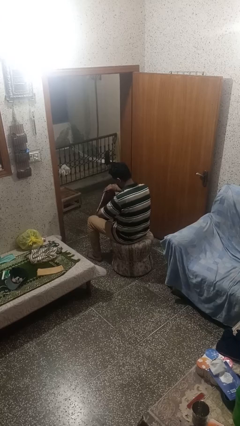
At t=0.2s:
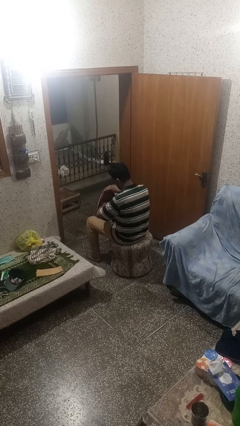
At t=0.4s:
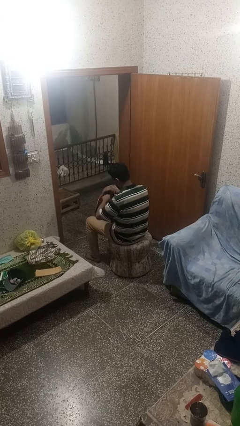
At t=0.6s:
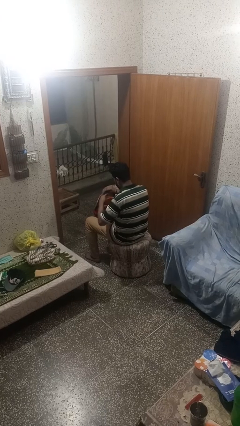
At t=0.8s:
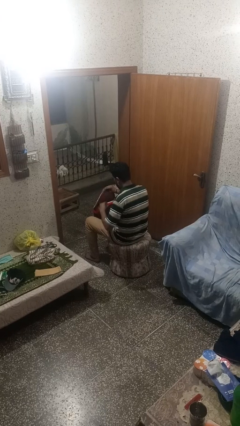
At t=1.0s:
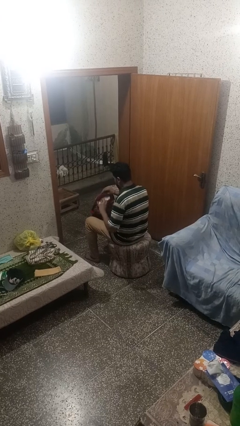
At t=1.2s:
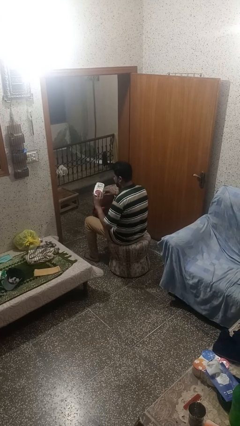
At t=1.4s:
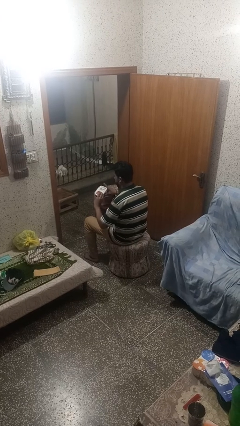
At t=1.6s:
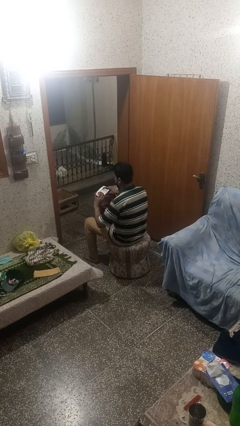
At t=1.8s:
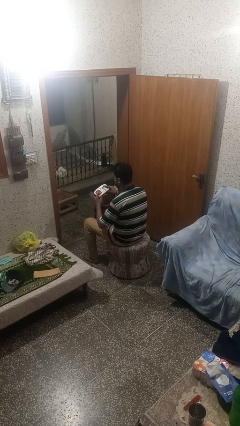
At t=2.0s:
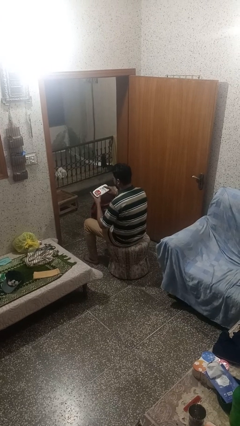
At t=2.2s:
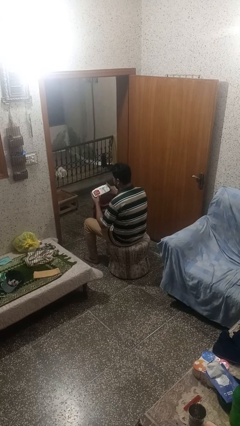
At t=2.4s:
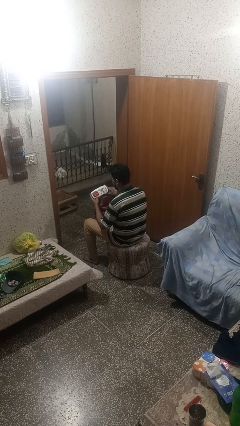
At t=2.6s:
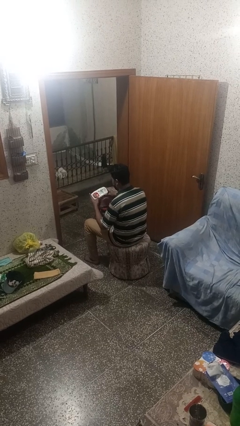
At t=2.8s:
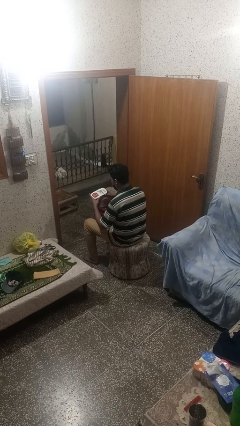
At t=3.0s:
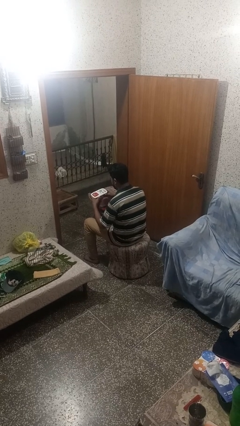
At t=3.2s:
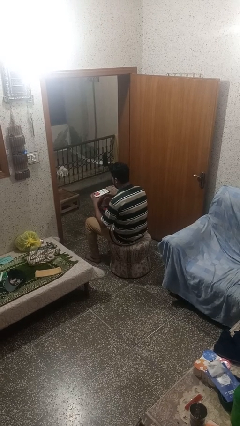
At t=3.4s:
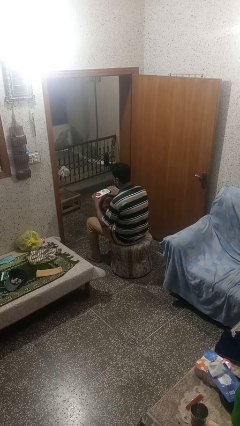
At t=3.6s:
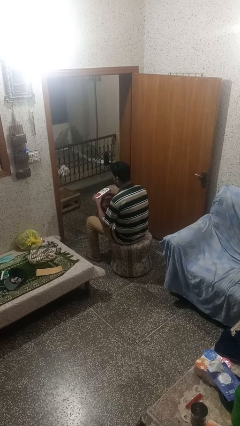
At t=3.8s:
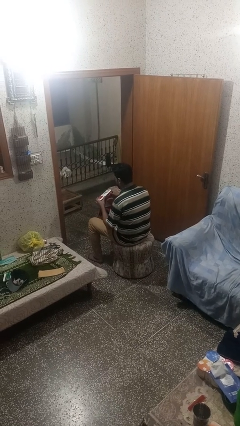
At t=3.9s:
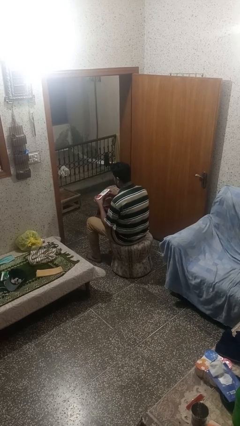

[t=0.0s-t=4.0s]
person takes object from backpack

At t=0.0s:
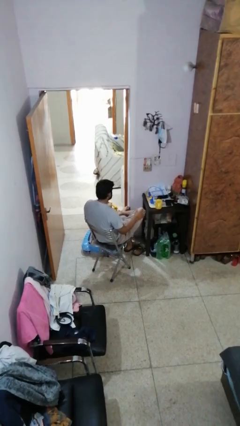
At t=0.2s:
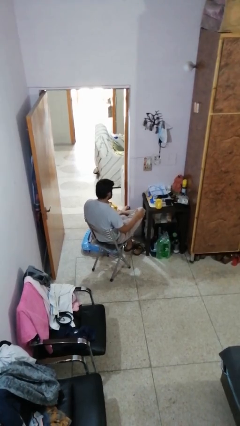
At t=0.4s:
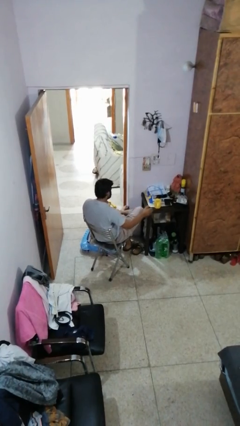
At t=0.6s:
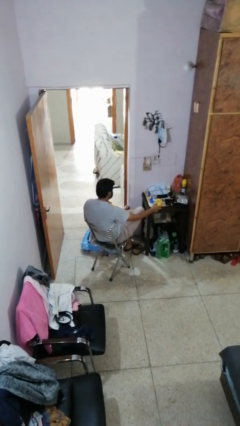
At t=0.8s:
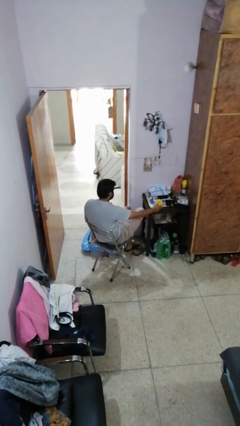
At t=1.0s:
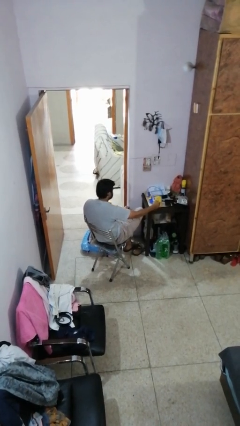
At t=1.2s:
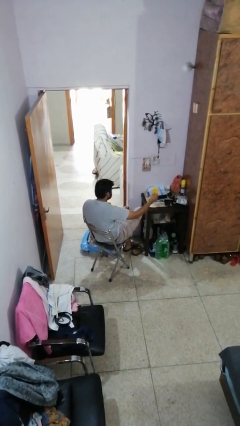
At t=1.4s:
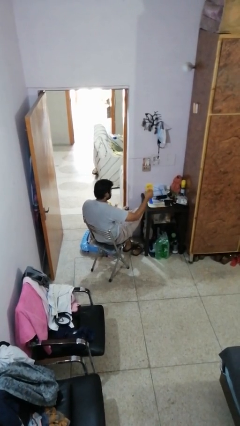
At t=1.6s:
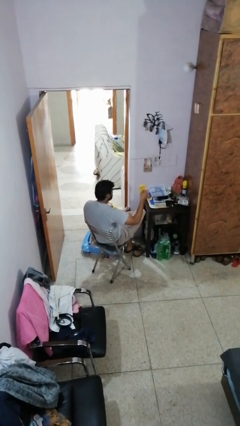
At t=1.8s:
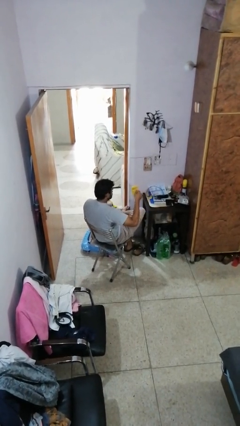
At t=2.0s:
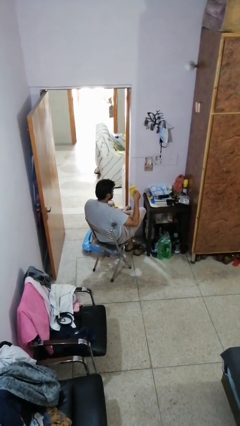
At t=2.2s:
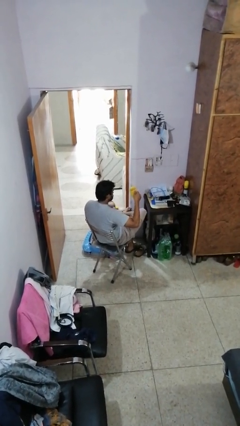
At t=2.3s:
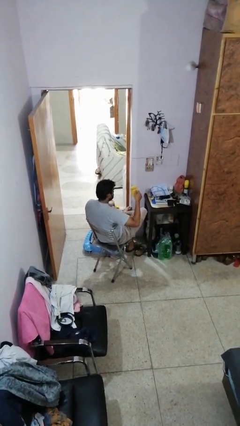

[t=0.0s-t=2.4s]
person picks up object from table

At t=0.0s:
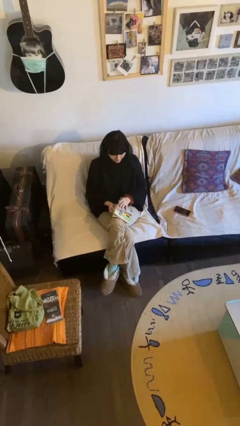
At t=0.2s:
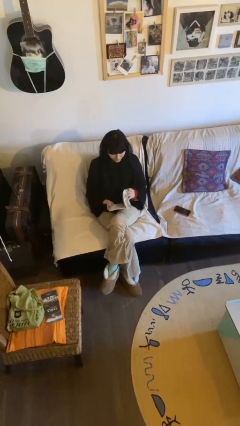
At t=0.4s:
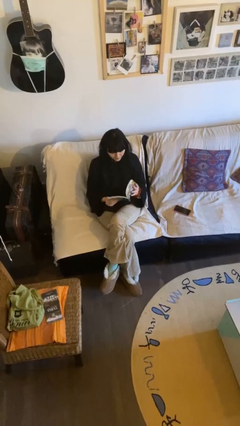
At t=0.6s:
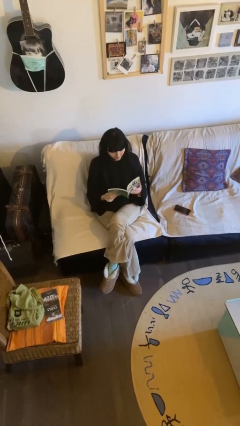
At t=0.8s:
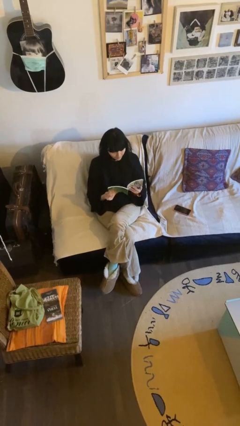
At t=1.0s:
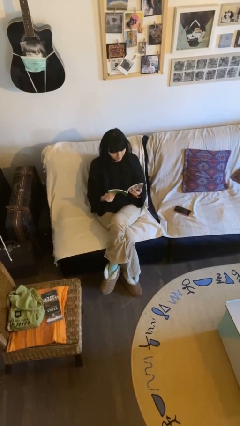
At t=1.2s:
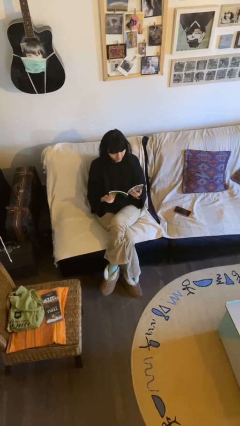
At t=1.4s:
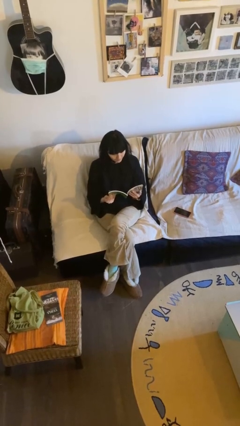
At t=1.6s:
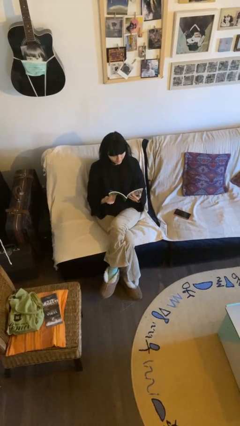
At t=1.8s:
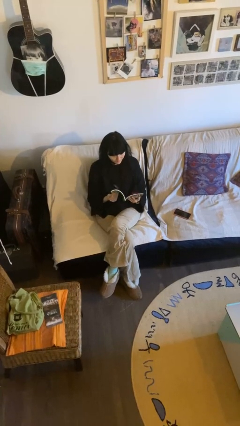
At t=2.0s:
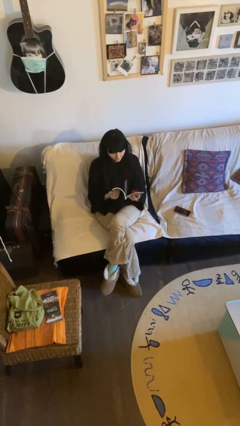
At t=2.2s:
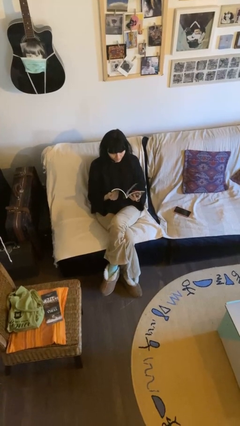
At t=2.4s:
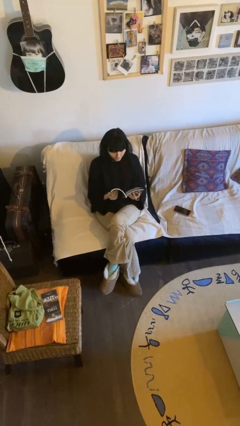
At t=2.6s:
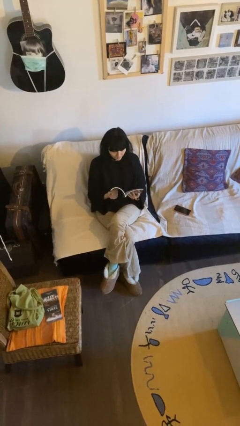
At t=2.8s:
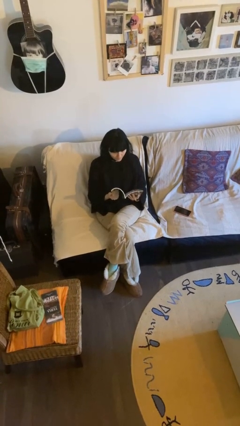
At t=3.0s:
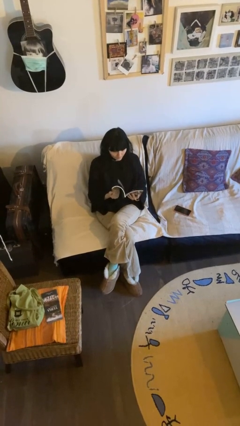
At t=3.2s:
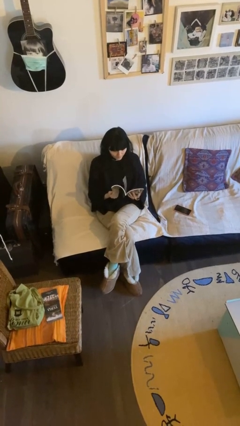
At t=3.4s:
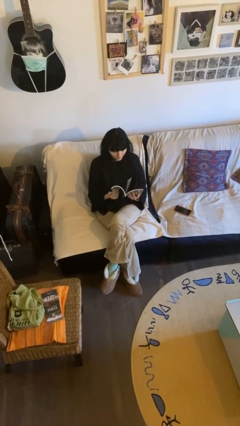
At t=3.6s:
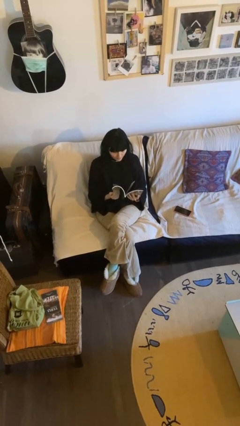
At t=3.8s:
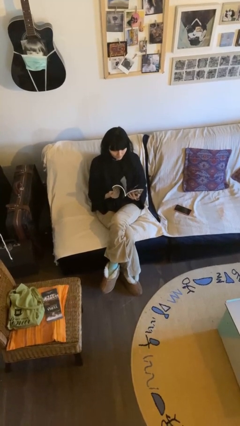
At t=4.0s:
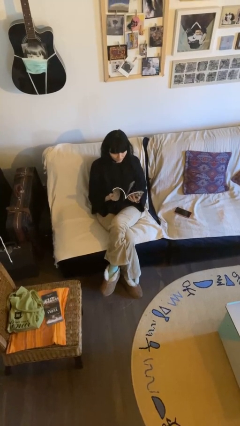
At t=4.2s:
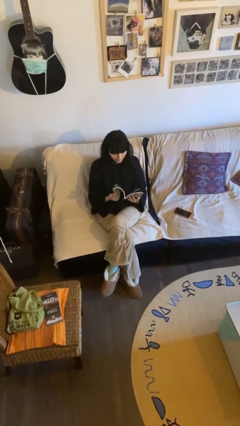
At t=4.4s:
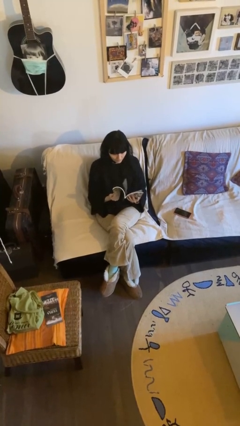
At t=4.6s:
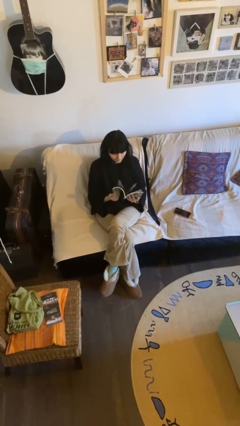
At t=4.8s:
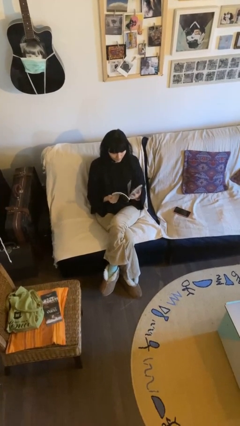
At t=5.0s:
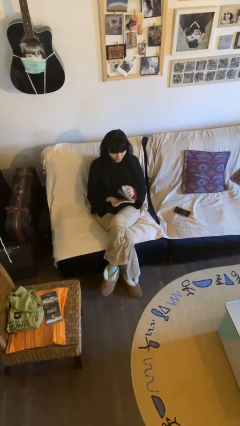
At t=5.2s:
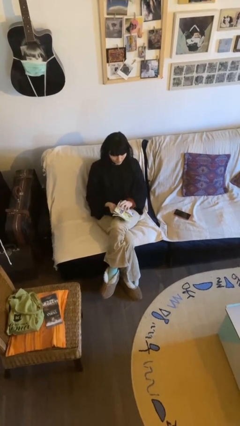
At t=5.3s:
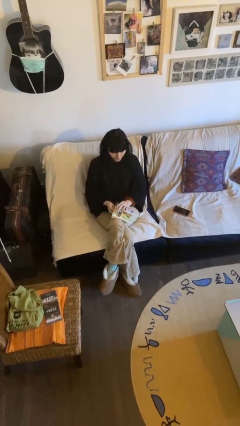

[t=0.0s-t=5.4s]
person reads document

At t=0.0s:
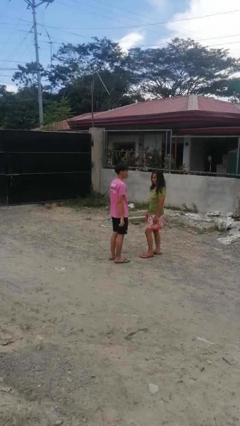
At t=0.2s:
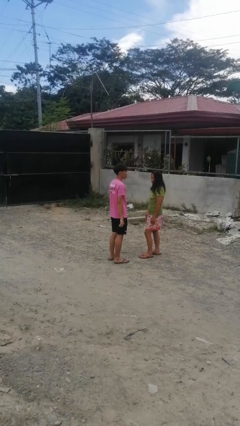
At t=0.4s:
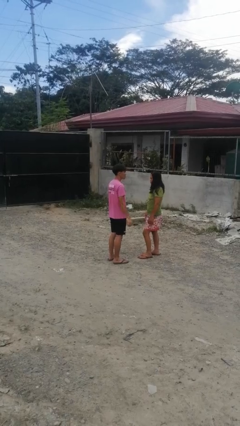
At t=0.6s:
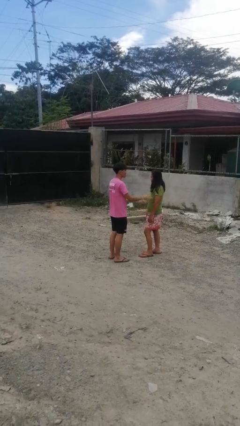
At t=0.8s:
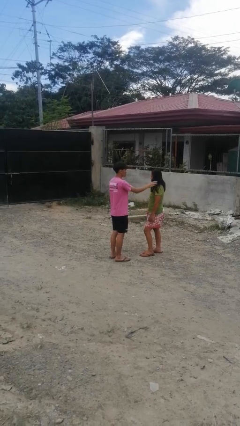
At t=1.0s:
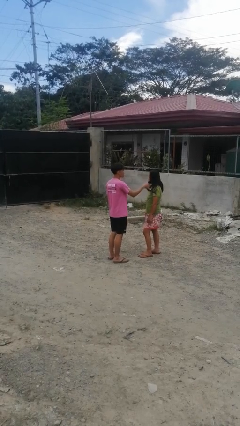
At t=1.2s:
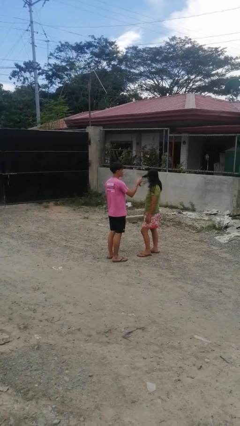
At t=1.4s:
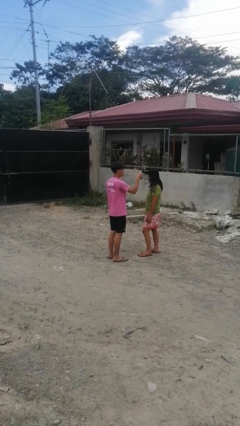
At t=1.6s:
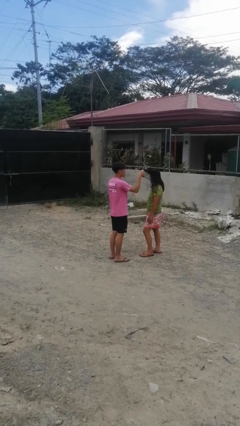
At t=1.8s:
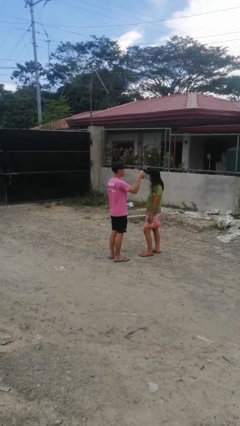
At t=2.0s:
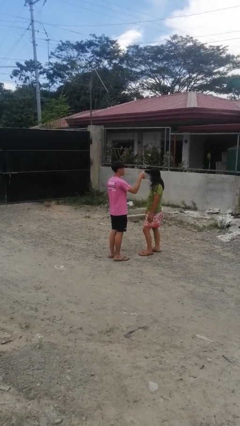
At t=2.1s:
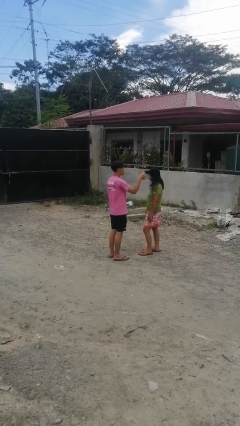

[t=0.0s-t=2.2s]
person grabs person by hair

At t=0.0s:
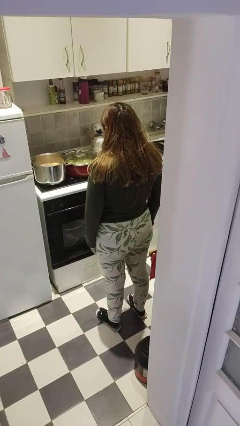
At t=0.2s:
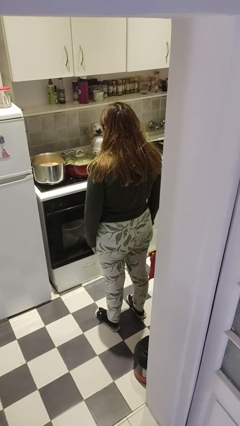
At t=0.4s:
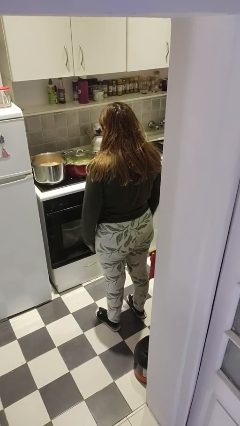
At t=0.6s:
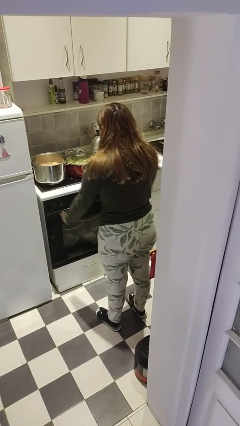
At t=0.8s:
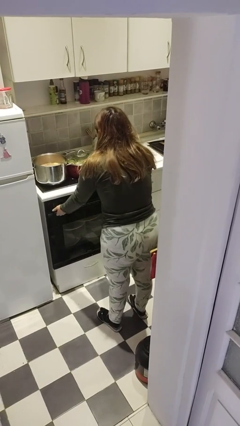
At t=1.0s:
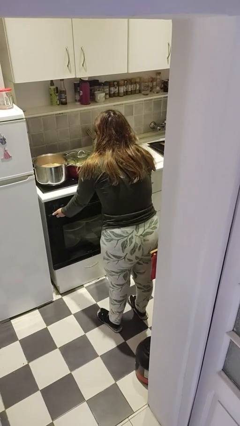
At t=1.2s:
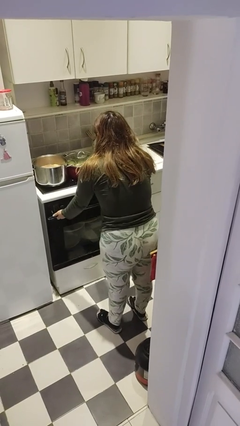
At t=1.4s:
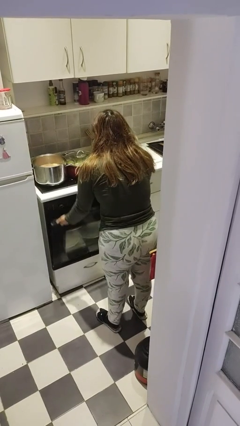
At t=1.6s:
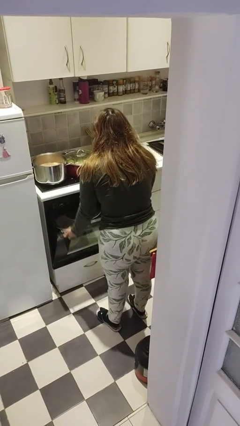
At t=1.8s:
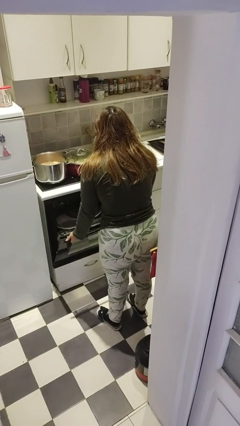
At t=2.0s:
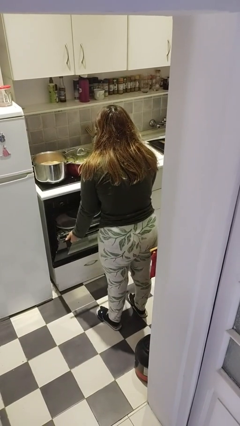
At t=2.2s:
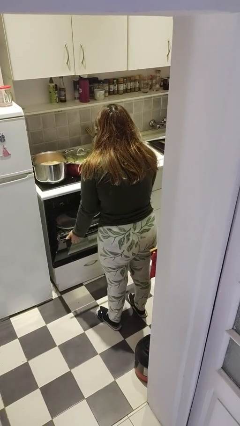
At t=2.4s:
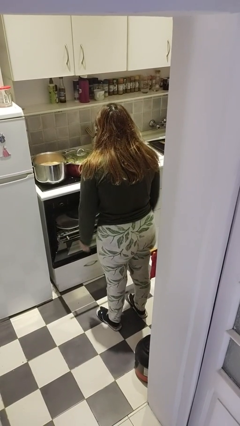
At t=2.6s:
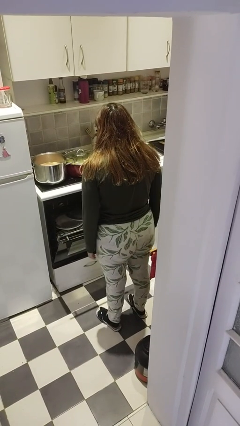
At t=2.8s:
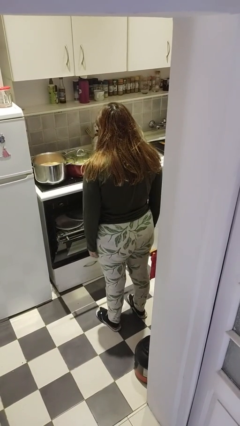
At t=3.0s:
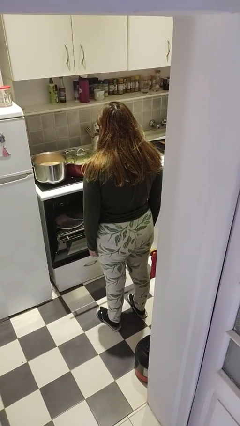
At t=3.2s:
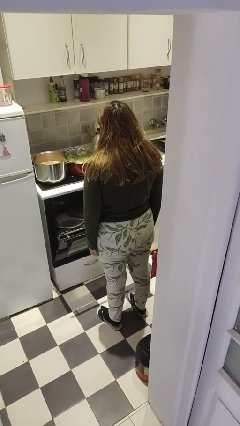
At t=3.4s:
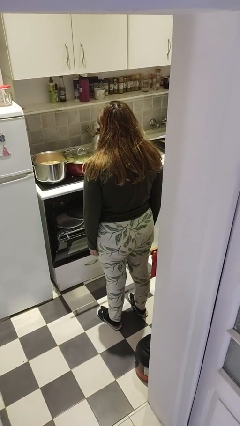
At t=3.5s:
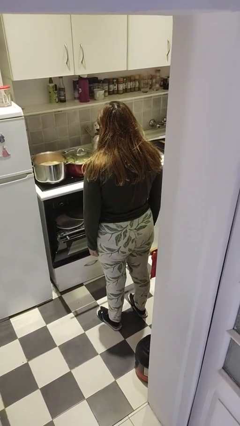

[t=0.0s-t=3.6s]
person opens dishwasher
